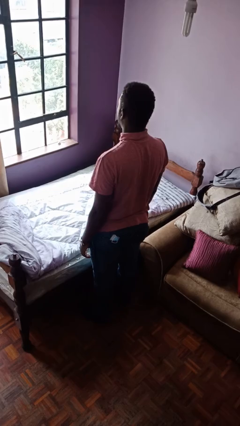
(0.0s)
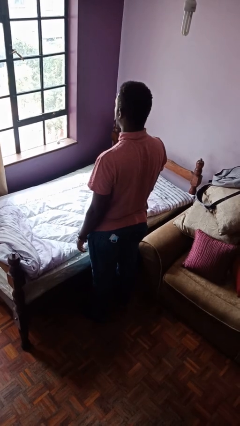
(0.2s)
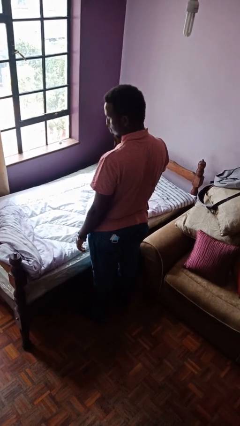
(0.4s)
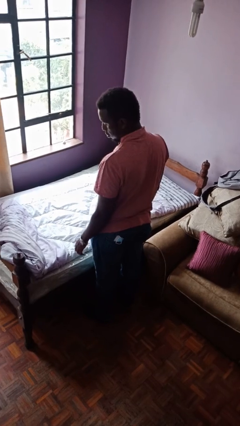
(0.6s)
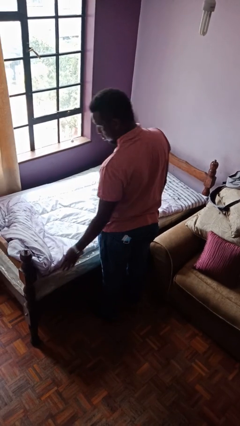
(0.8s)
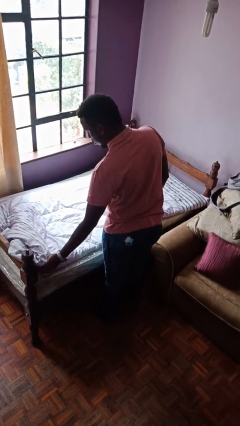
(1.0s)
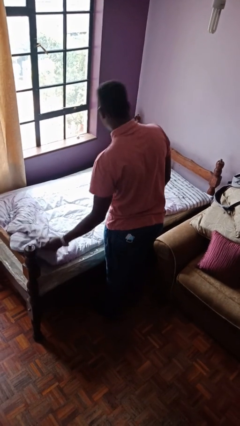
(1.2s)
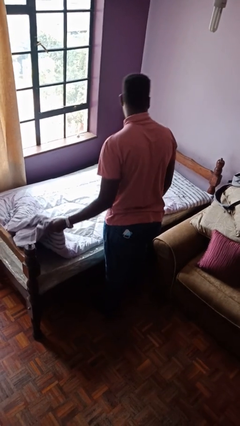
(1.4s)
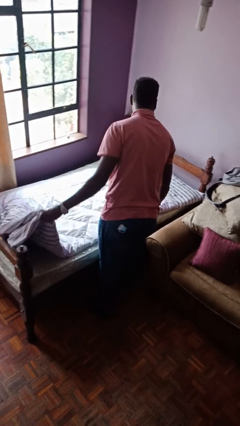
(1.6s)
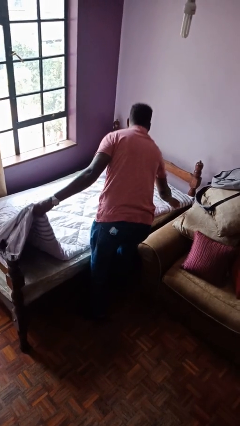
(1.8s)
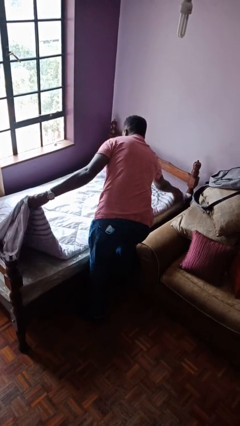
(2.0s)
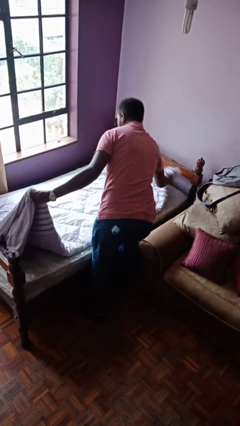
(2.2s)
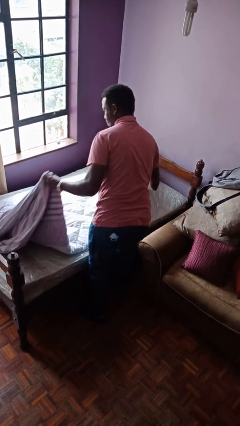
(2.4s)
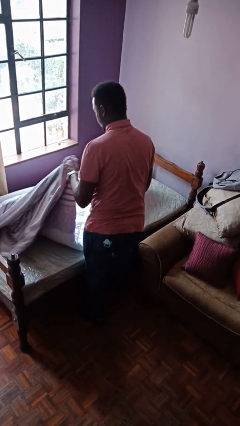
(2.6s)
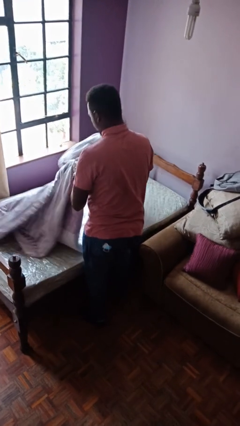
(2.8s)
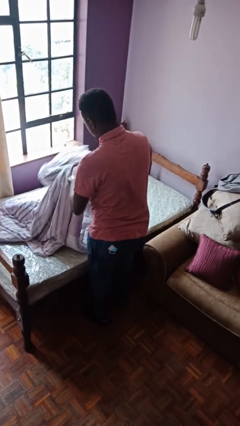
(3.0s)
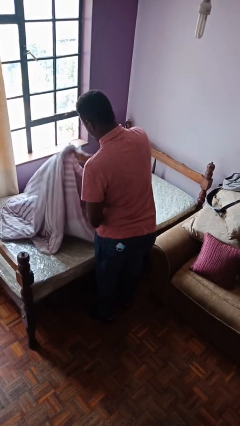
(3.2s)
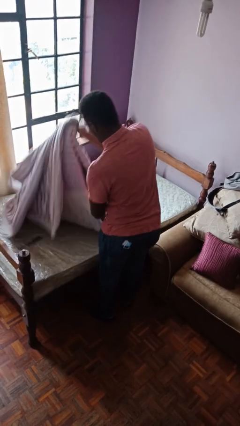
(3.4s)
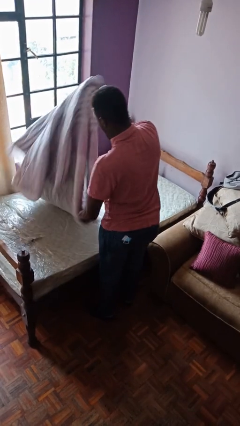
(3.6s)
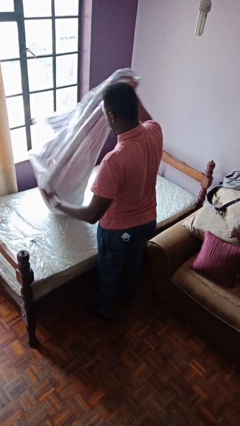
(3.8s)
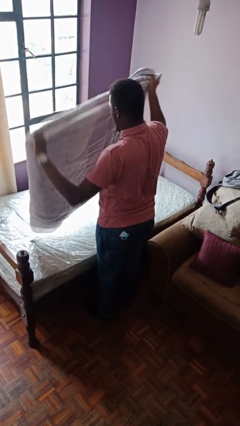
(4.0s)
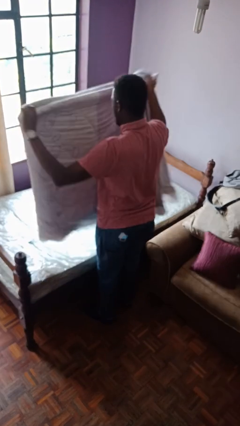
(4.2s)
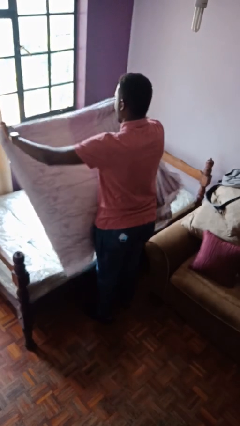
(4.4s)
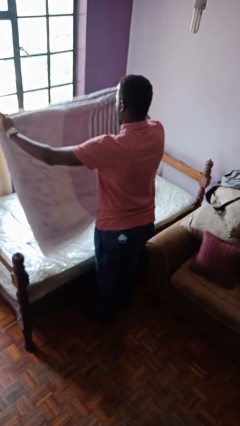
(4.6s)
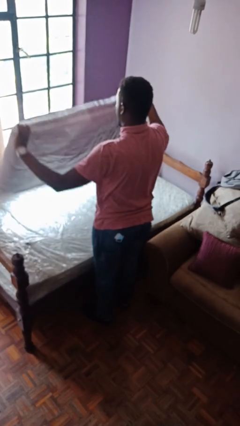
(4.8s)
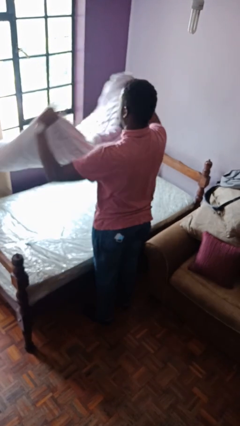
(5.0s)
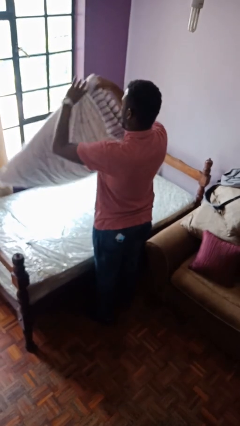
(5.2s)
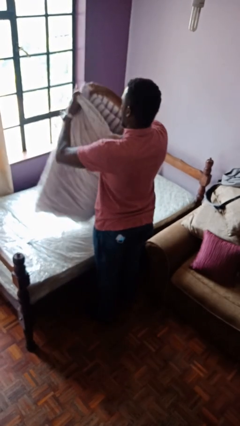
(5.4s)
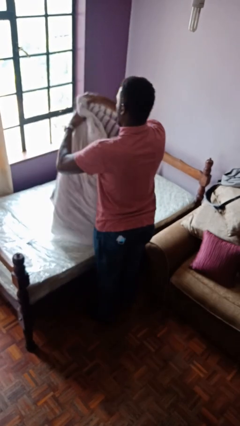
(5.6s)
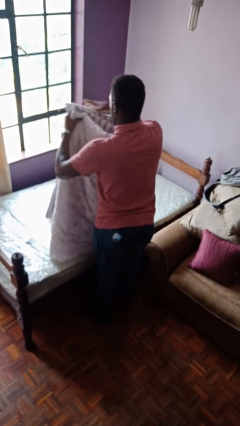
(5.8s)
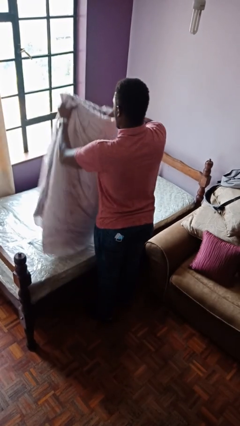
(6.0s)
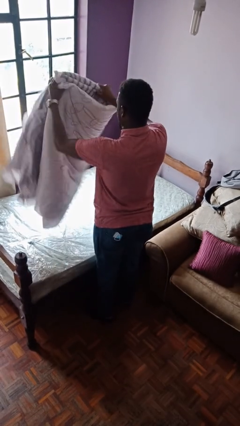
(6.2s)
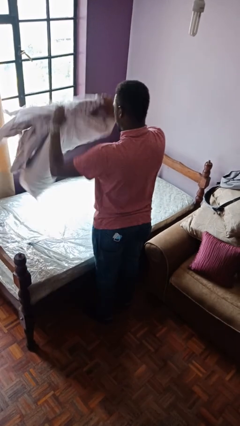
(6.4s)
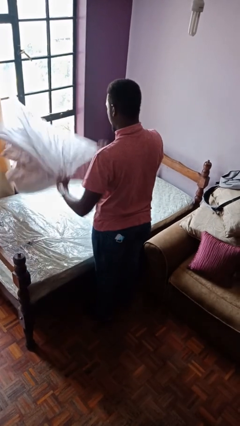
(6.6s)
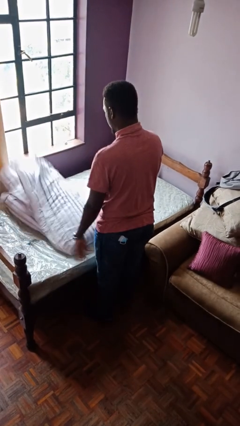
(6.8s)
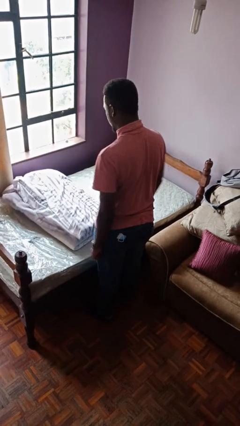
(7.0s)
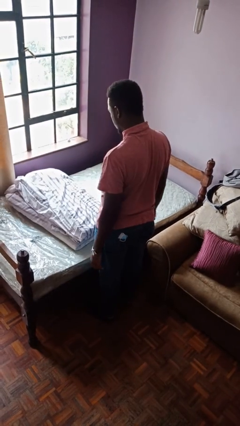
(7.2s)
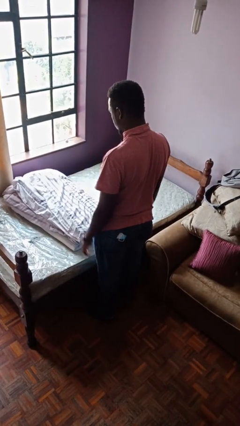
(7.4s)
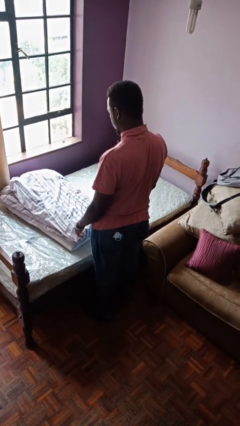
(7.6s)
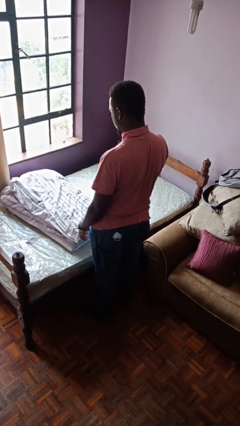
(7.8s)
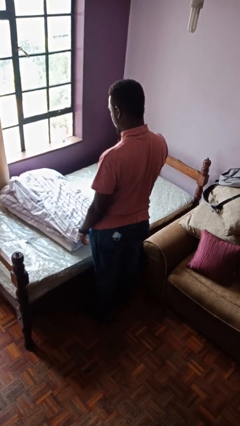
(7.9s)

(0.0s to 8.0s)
person folds blanket

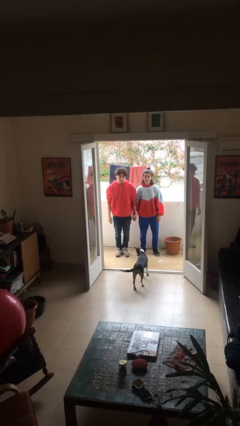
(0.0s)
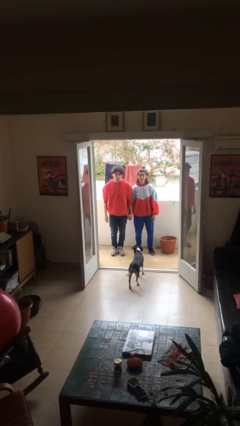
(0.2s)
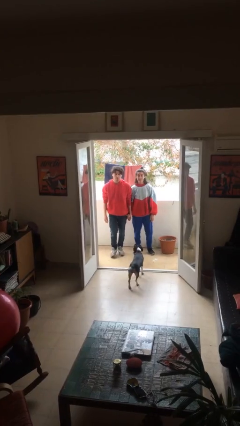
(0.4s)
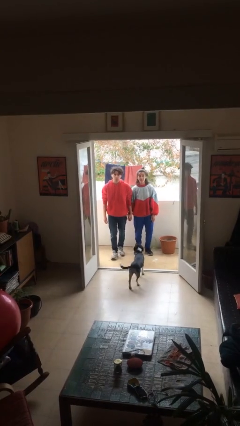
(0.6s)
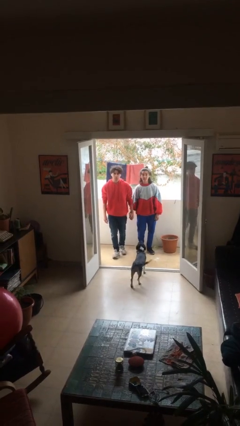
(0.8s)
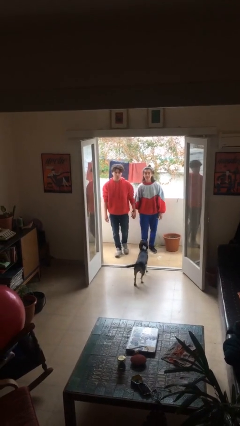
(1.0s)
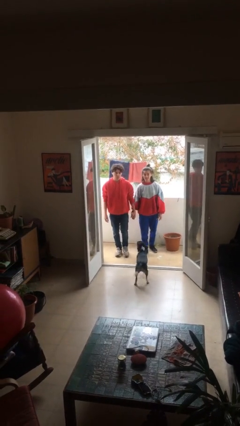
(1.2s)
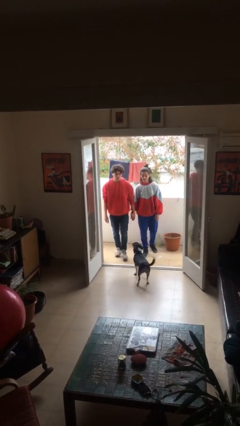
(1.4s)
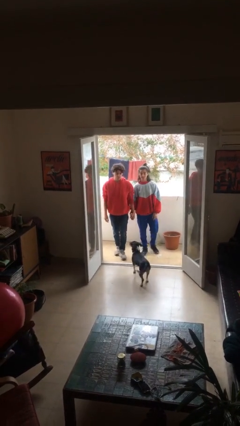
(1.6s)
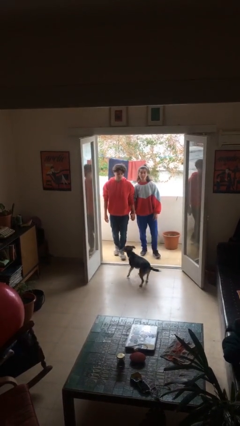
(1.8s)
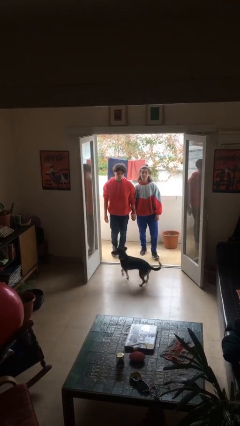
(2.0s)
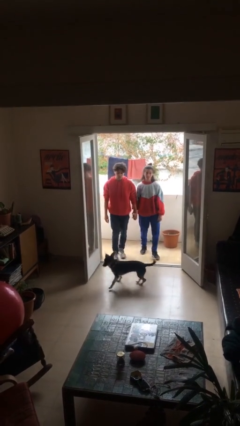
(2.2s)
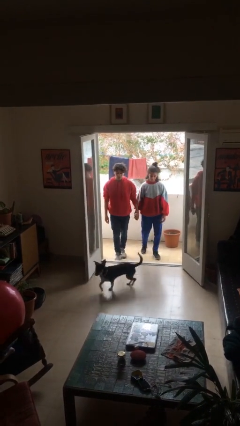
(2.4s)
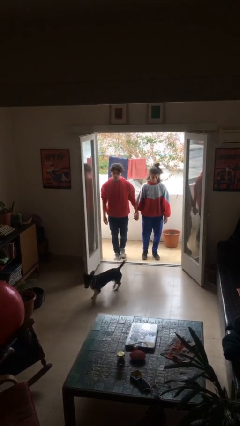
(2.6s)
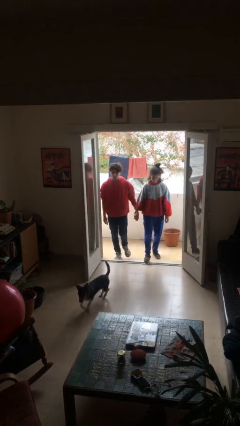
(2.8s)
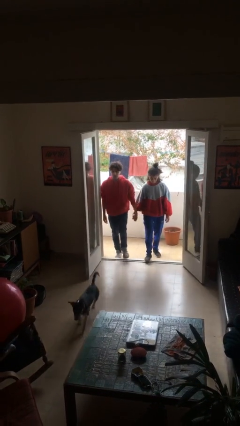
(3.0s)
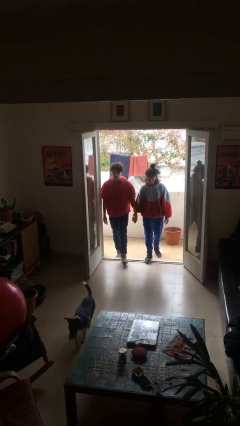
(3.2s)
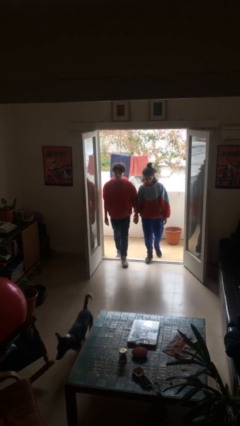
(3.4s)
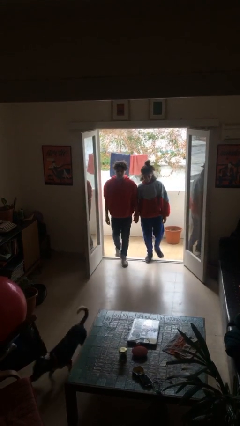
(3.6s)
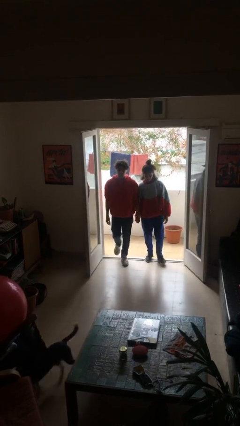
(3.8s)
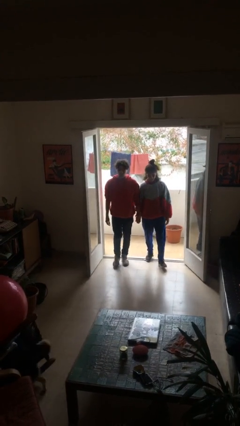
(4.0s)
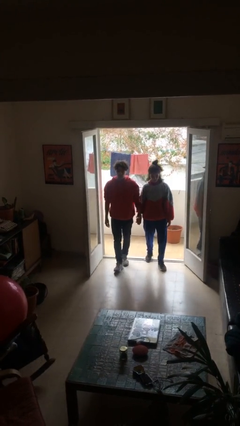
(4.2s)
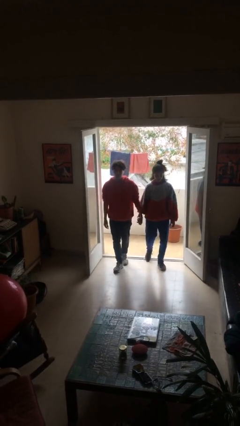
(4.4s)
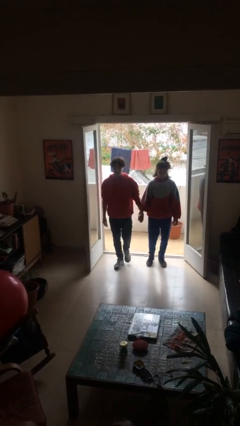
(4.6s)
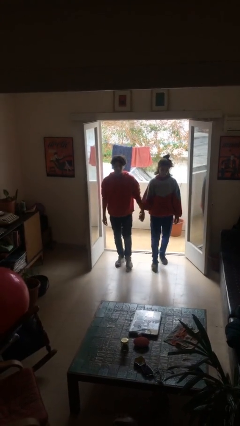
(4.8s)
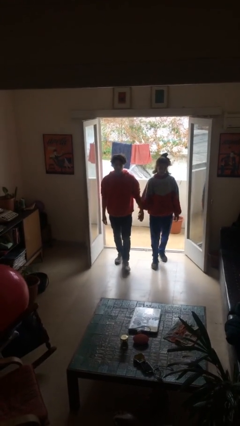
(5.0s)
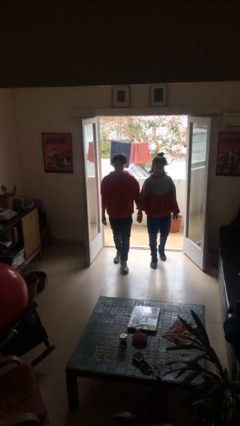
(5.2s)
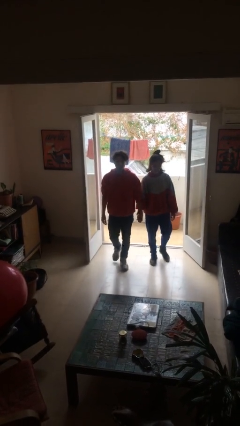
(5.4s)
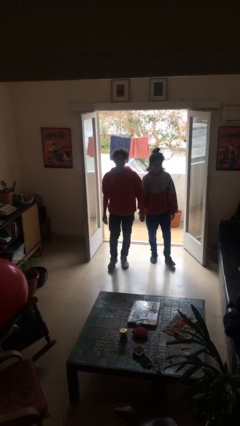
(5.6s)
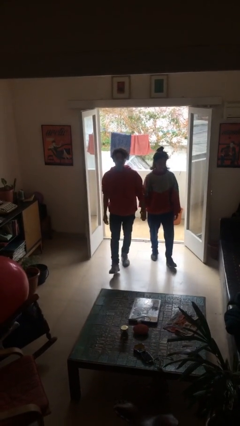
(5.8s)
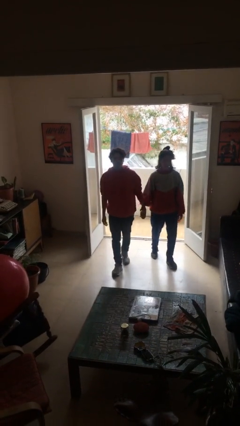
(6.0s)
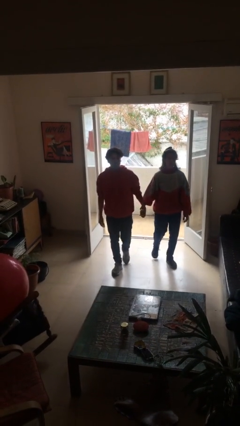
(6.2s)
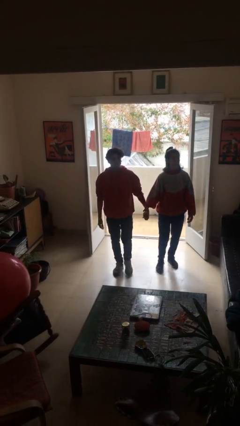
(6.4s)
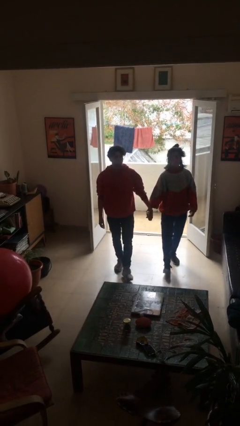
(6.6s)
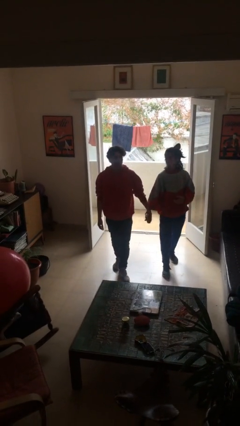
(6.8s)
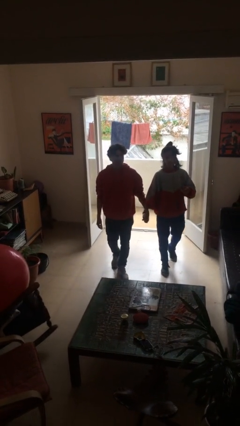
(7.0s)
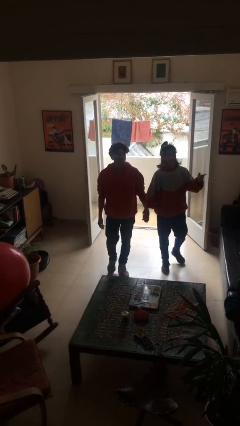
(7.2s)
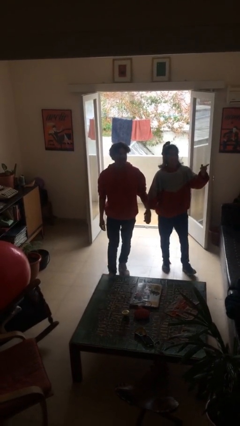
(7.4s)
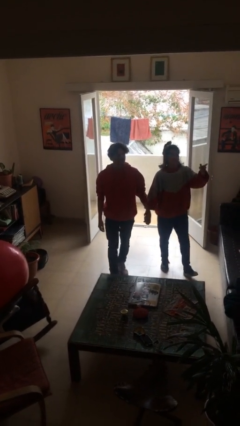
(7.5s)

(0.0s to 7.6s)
person holds hand

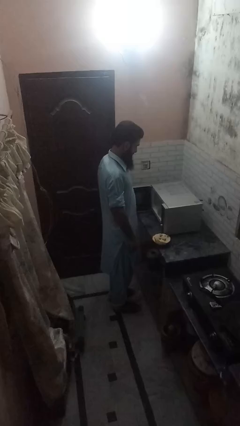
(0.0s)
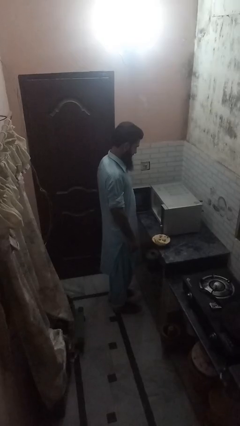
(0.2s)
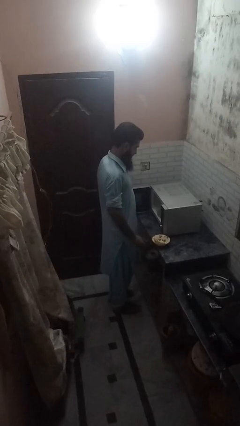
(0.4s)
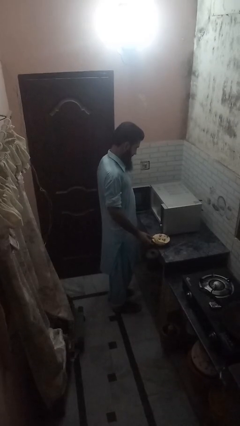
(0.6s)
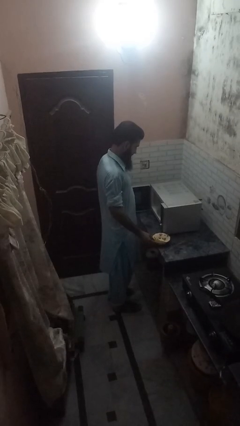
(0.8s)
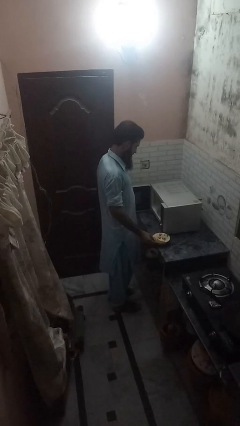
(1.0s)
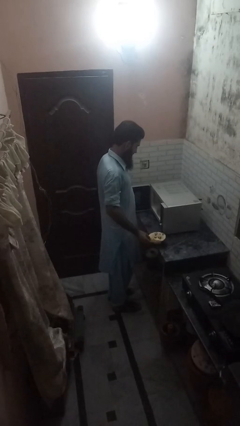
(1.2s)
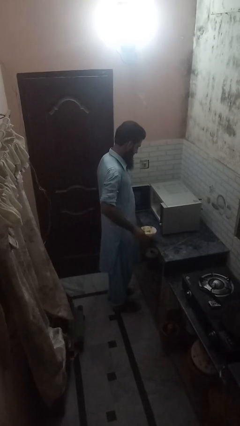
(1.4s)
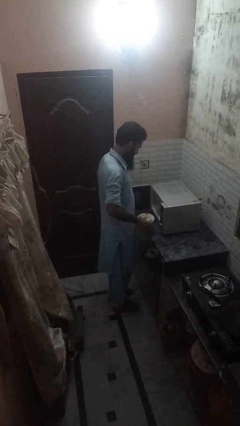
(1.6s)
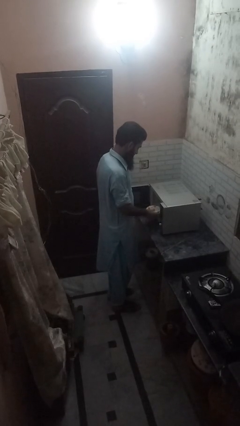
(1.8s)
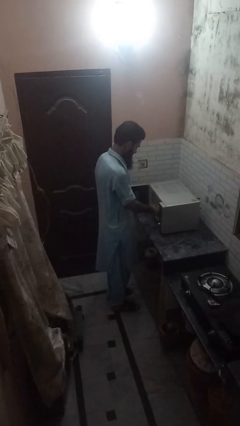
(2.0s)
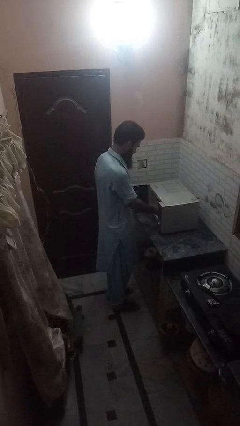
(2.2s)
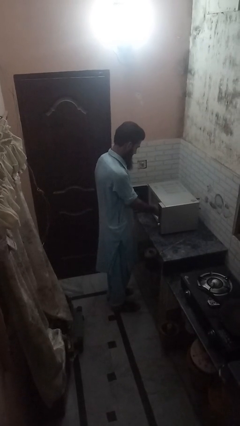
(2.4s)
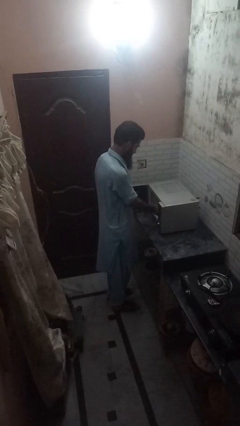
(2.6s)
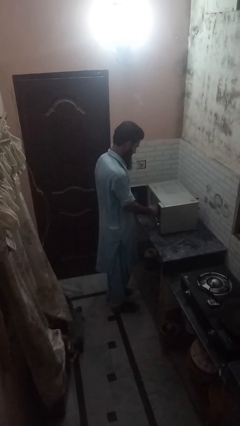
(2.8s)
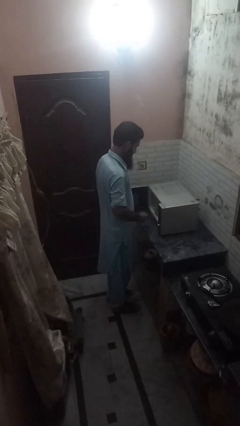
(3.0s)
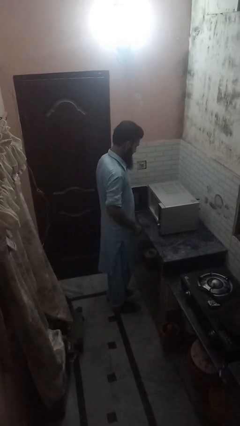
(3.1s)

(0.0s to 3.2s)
person puts object into microwave
